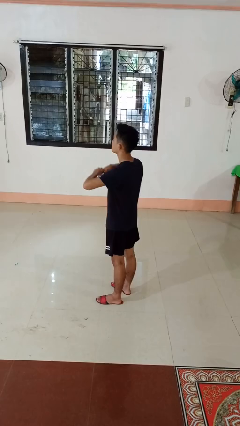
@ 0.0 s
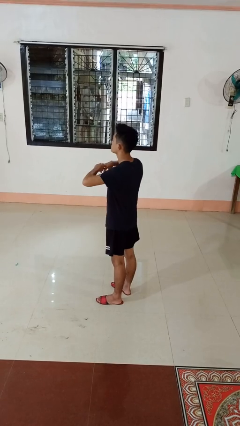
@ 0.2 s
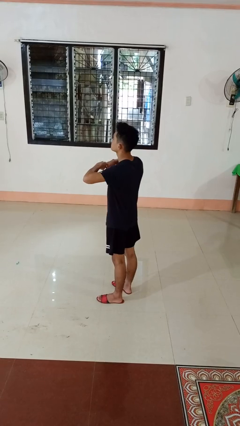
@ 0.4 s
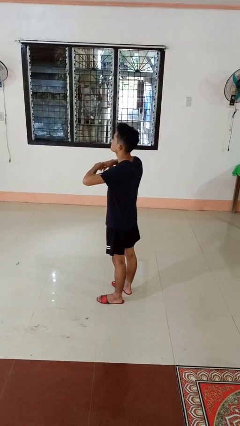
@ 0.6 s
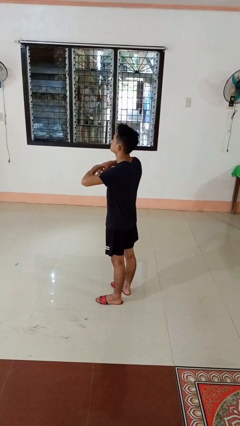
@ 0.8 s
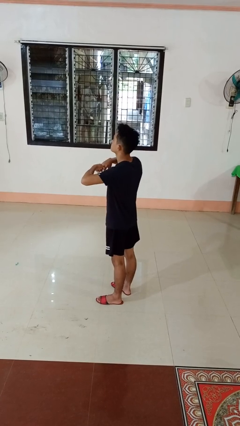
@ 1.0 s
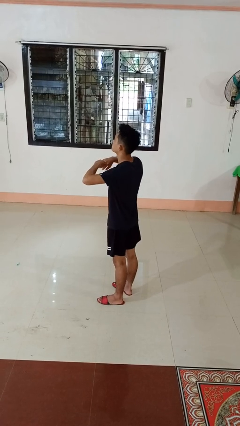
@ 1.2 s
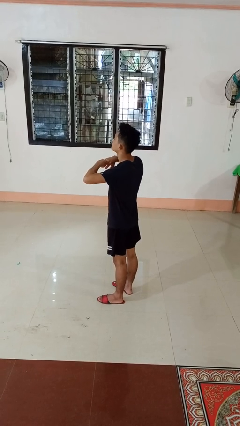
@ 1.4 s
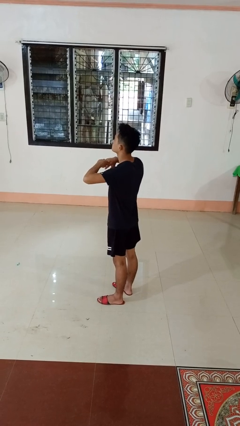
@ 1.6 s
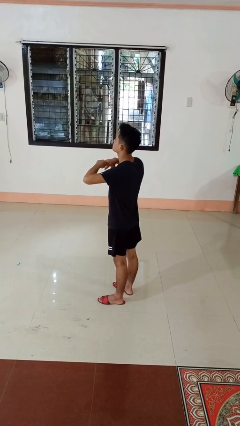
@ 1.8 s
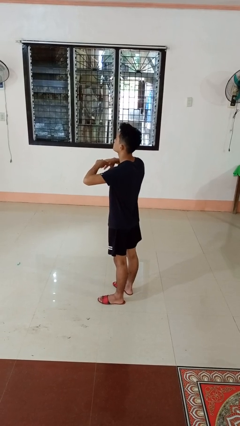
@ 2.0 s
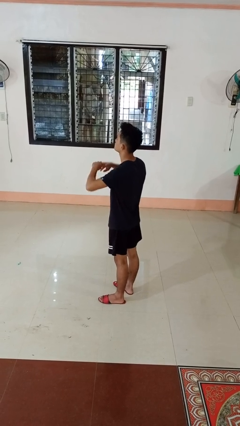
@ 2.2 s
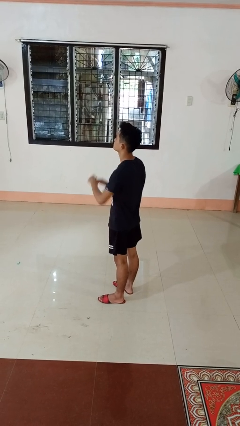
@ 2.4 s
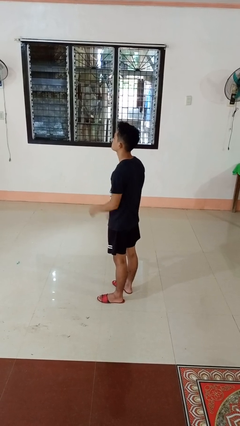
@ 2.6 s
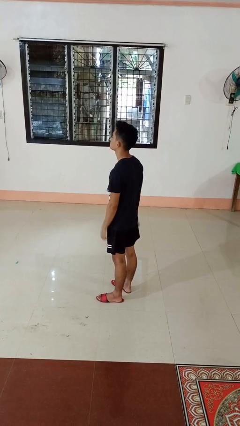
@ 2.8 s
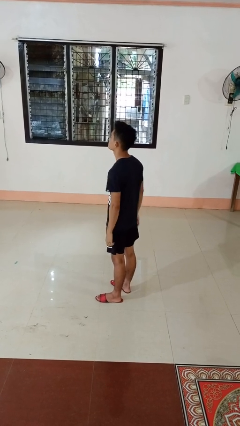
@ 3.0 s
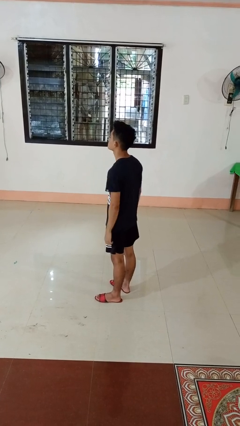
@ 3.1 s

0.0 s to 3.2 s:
person cracks knuckles

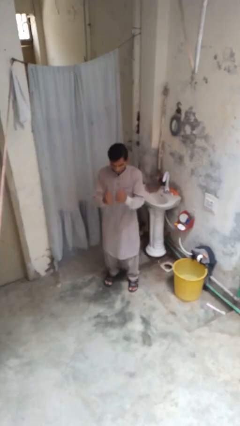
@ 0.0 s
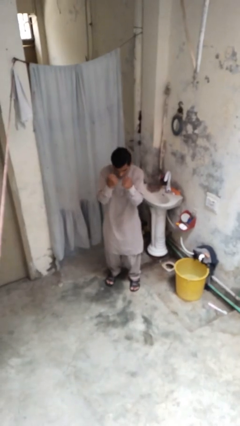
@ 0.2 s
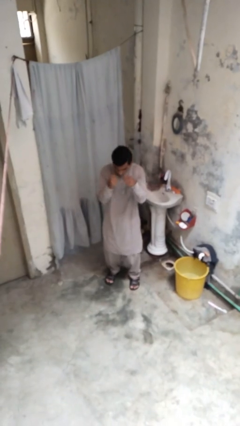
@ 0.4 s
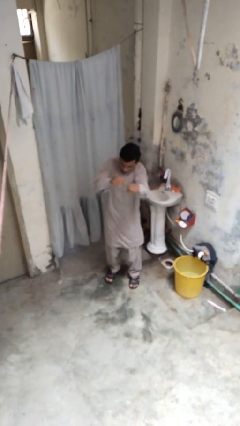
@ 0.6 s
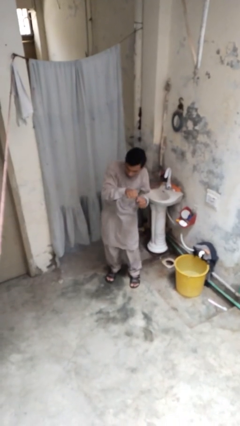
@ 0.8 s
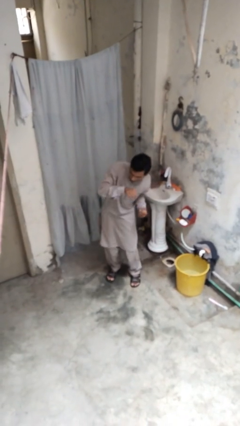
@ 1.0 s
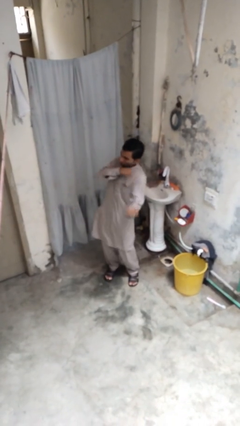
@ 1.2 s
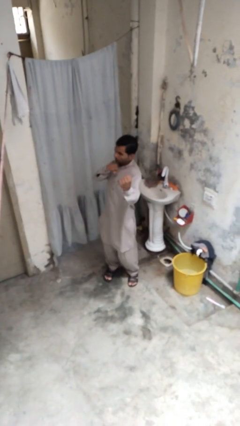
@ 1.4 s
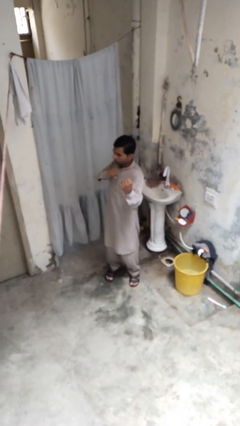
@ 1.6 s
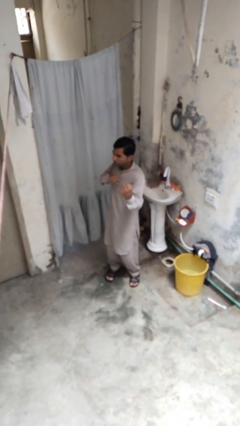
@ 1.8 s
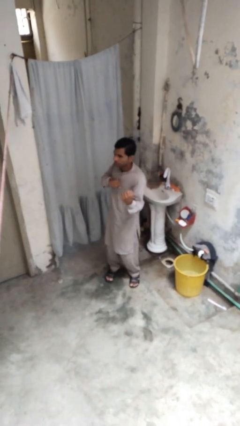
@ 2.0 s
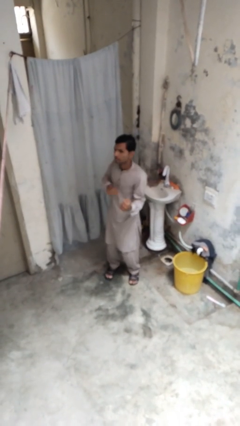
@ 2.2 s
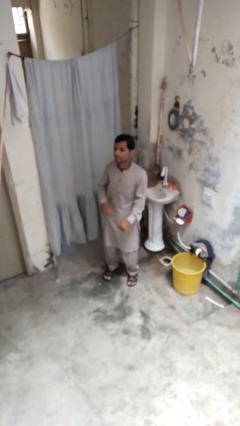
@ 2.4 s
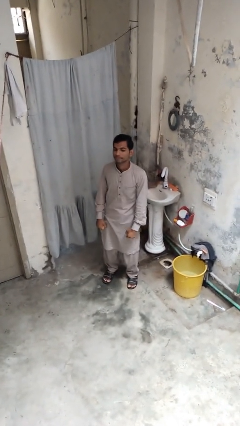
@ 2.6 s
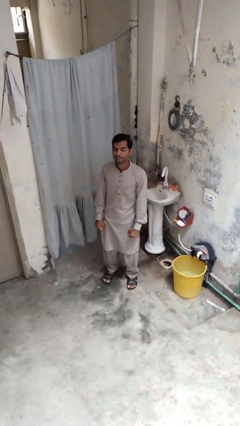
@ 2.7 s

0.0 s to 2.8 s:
person punches

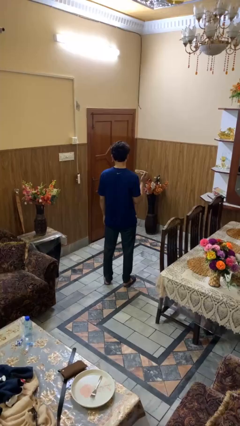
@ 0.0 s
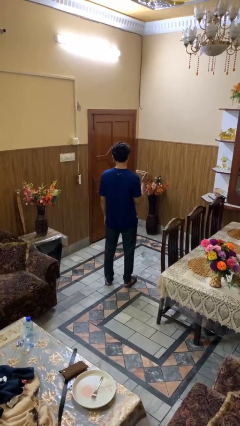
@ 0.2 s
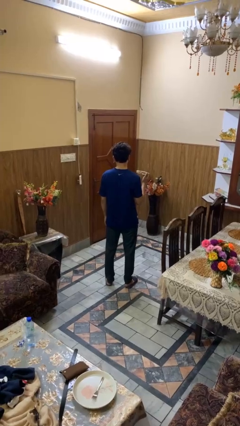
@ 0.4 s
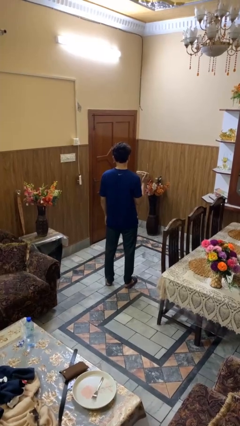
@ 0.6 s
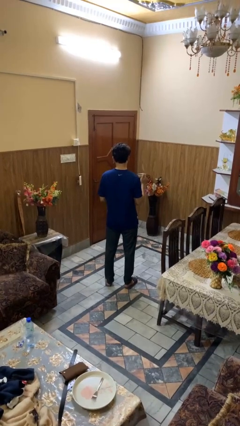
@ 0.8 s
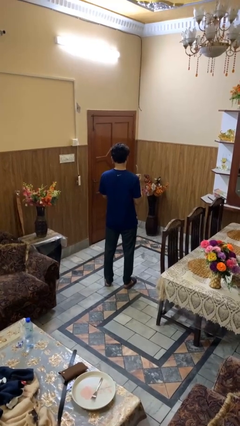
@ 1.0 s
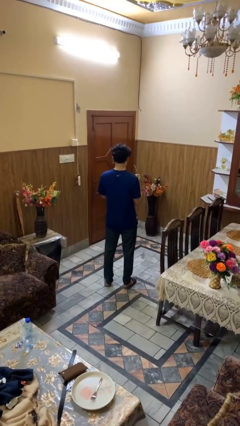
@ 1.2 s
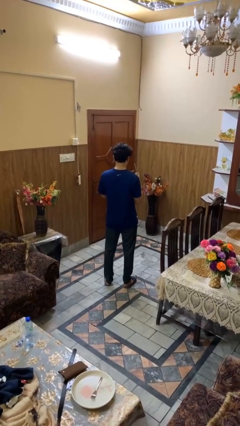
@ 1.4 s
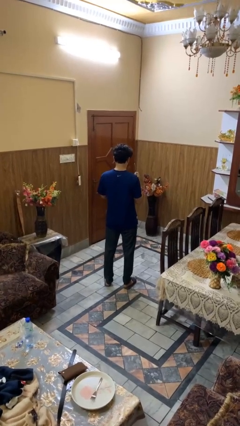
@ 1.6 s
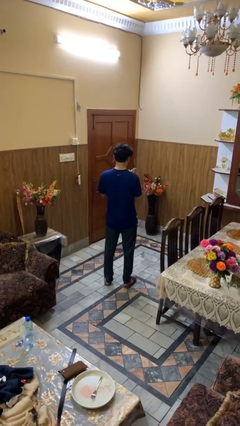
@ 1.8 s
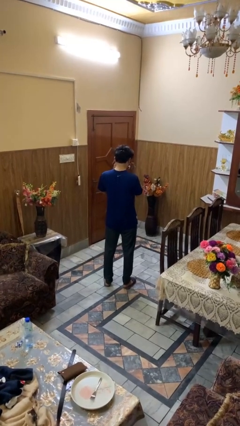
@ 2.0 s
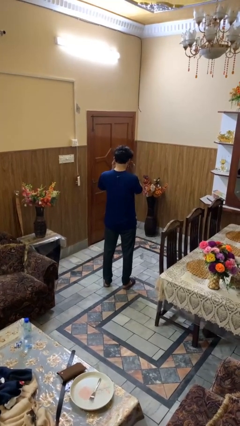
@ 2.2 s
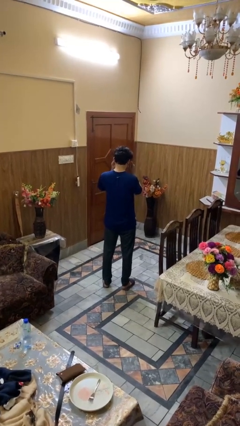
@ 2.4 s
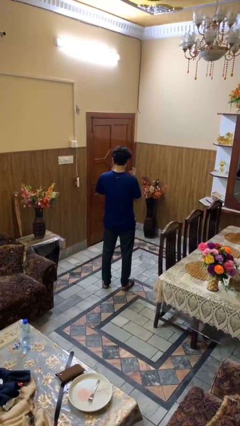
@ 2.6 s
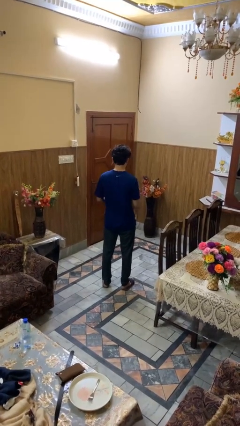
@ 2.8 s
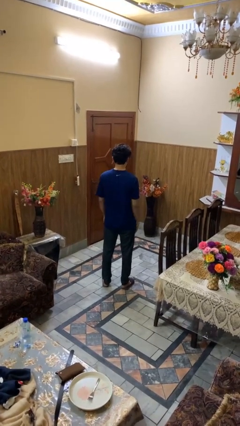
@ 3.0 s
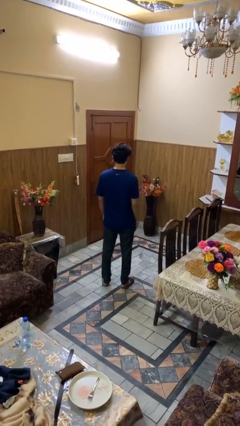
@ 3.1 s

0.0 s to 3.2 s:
person puts on sunglasses

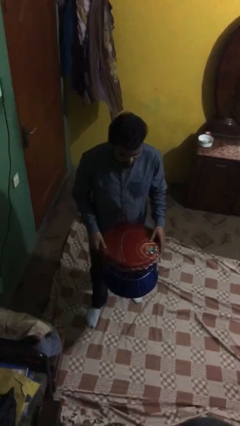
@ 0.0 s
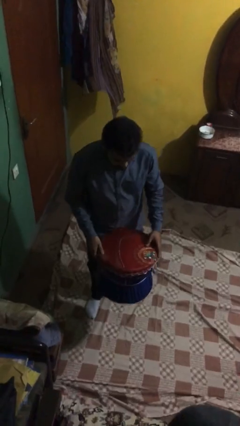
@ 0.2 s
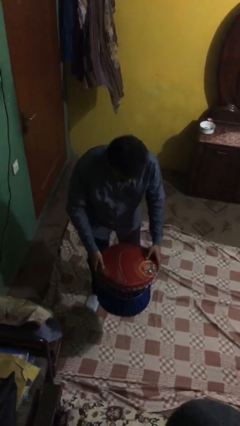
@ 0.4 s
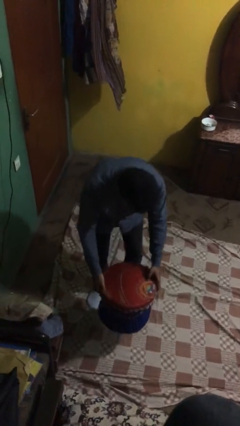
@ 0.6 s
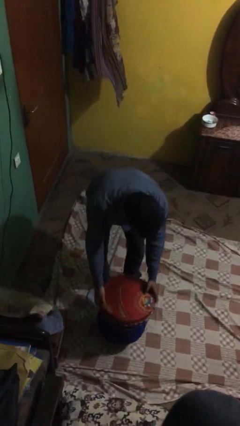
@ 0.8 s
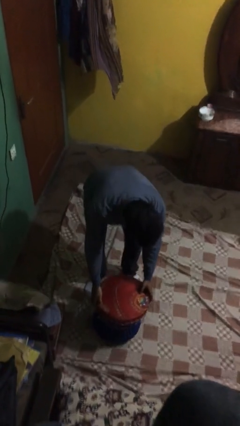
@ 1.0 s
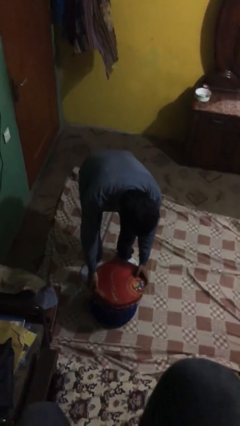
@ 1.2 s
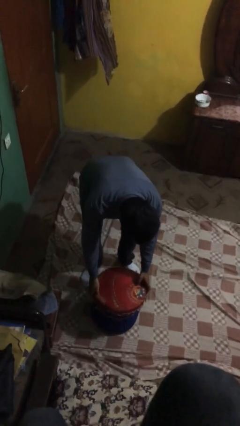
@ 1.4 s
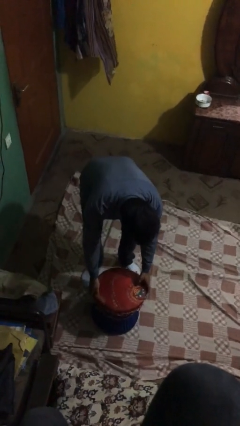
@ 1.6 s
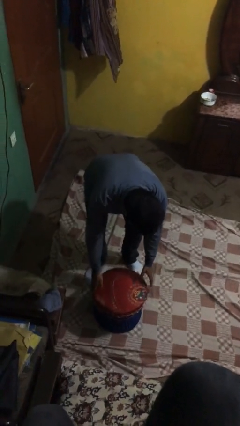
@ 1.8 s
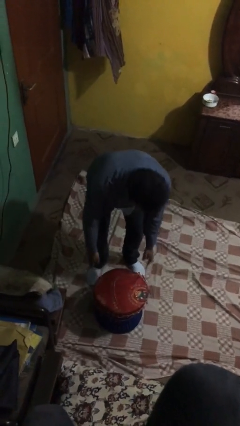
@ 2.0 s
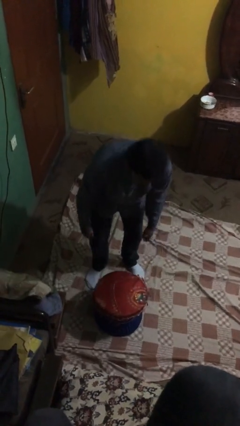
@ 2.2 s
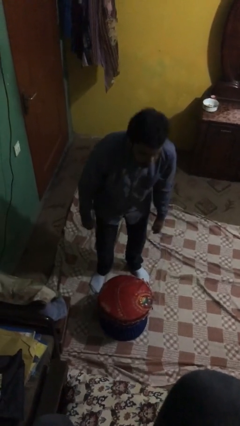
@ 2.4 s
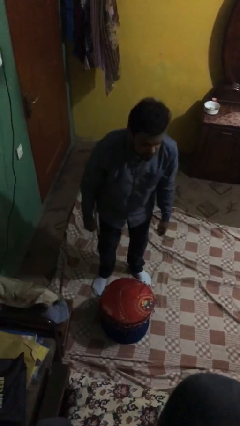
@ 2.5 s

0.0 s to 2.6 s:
person puts down object on floor

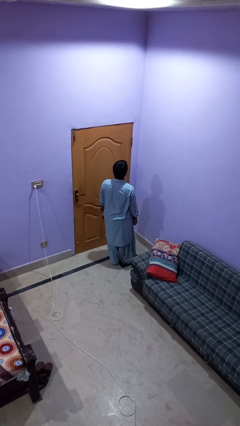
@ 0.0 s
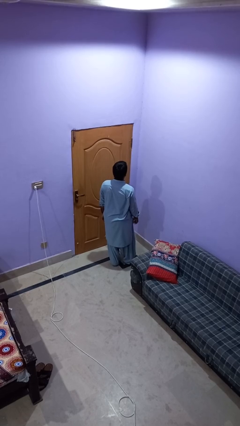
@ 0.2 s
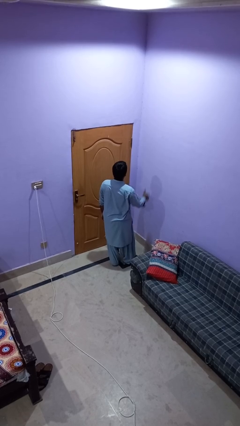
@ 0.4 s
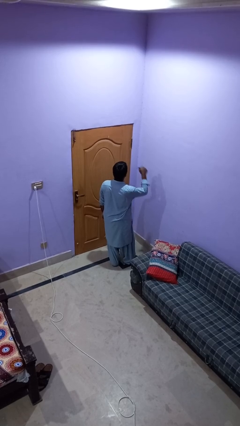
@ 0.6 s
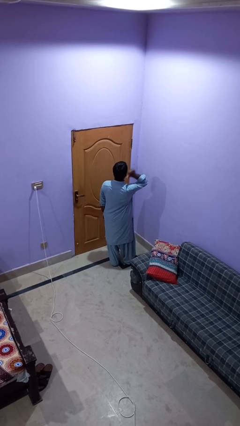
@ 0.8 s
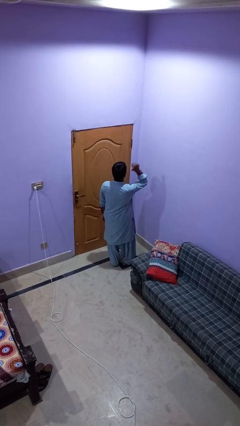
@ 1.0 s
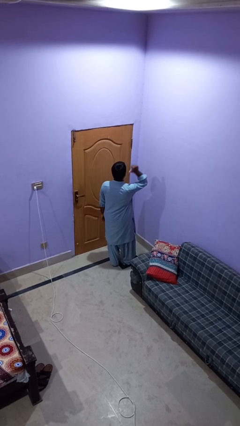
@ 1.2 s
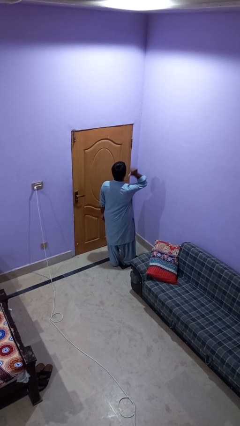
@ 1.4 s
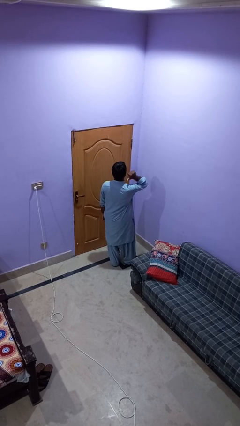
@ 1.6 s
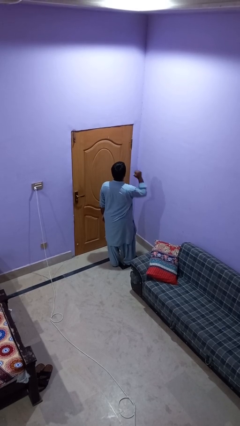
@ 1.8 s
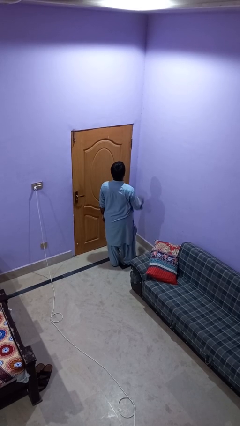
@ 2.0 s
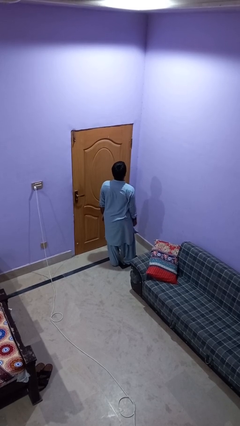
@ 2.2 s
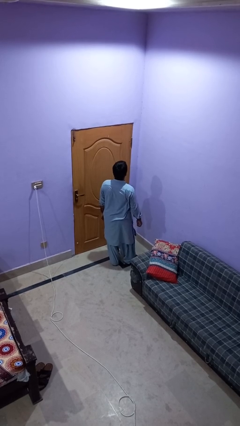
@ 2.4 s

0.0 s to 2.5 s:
person gestures behind me

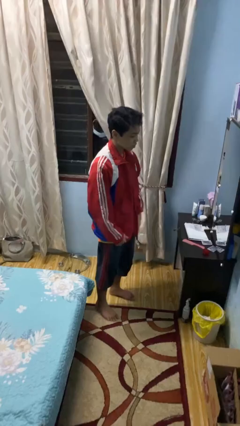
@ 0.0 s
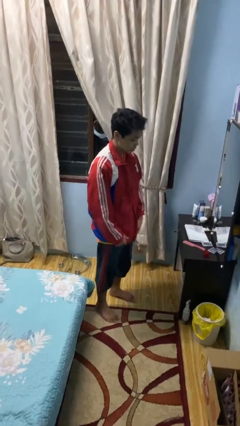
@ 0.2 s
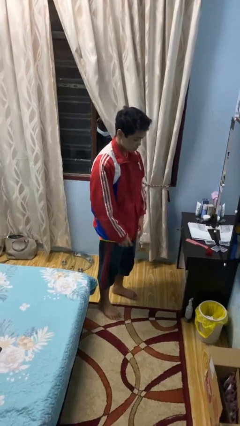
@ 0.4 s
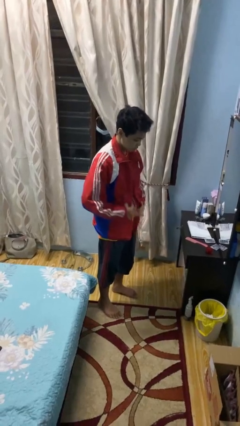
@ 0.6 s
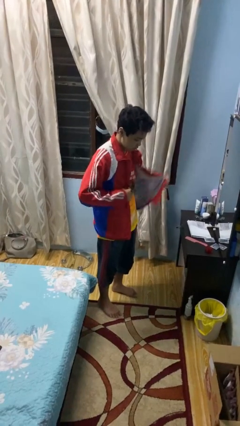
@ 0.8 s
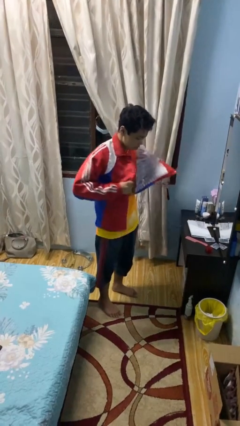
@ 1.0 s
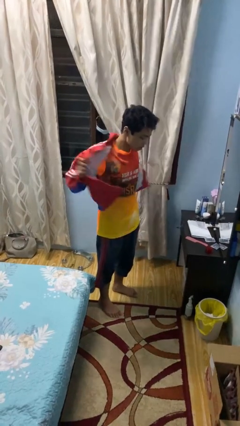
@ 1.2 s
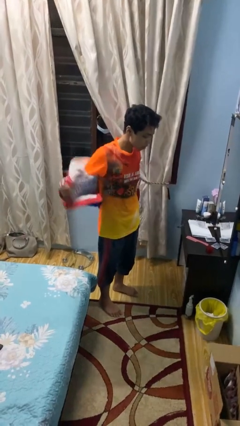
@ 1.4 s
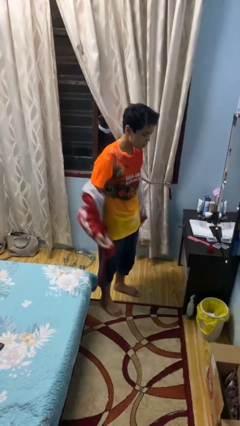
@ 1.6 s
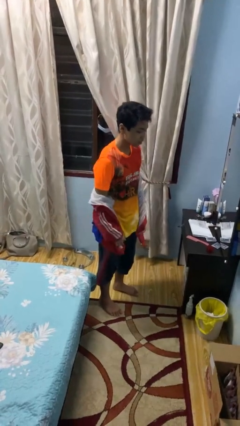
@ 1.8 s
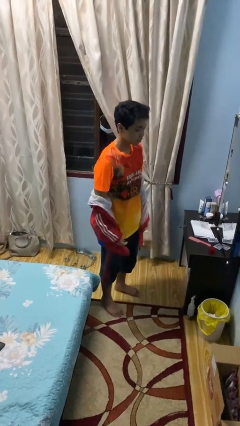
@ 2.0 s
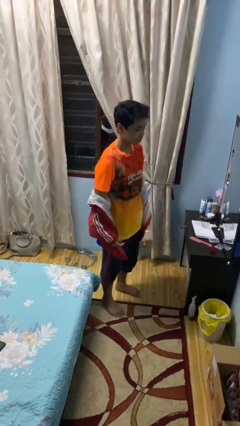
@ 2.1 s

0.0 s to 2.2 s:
person takes off jacket

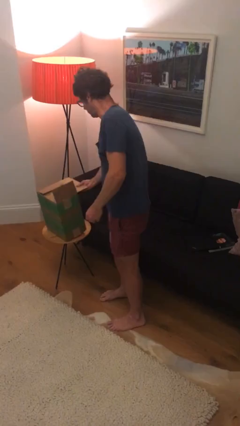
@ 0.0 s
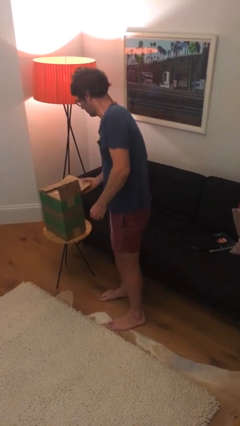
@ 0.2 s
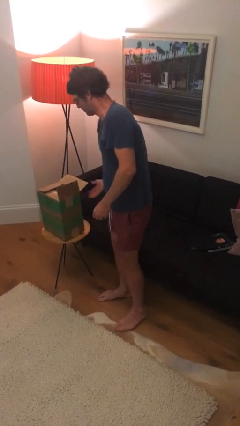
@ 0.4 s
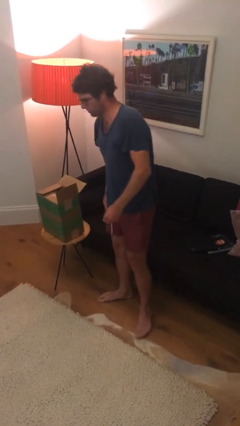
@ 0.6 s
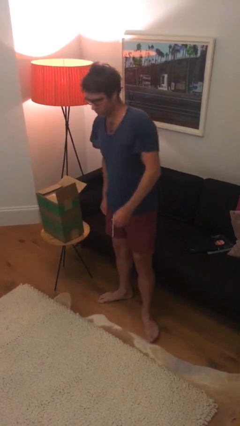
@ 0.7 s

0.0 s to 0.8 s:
person puts down object on table
